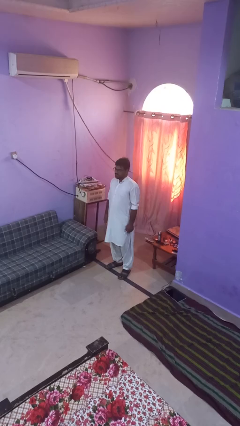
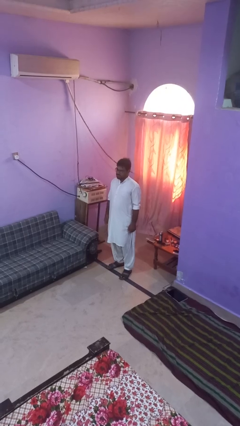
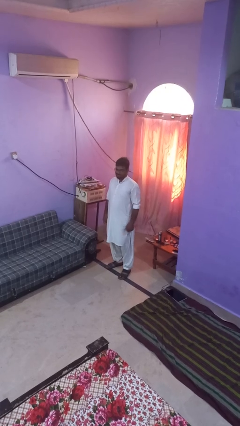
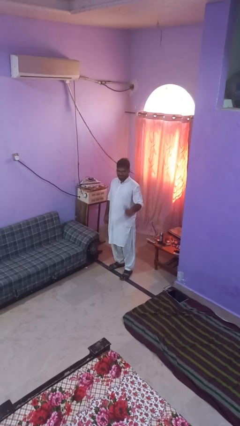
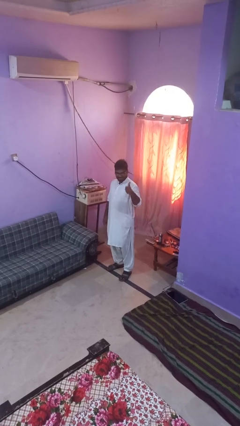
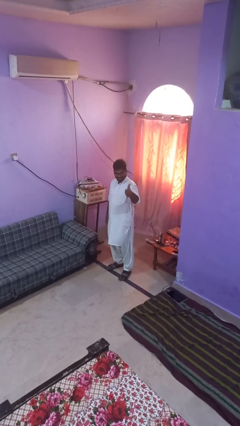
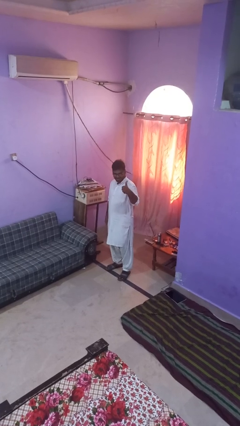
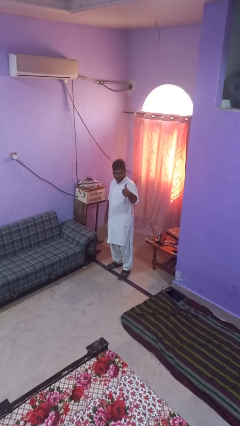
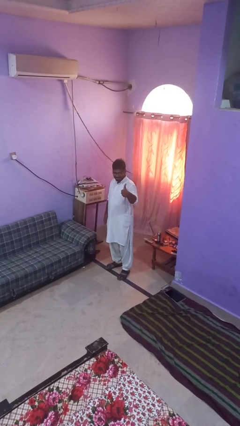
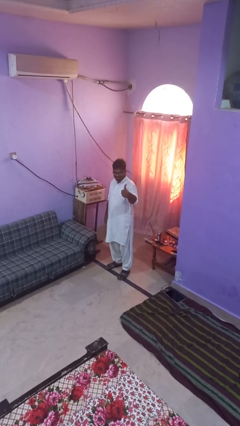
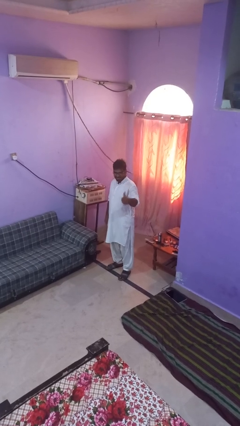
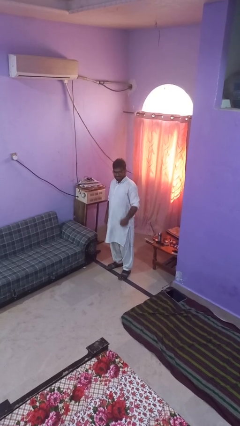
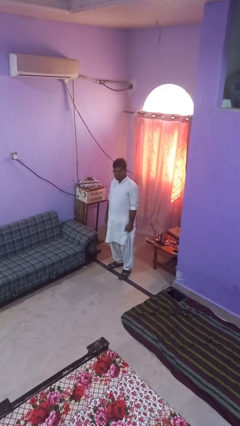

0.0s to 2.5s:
person gestures thumbs up

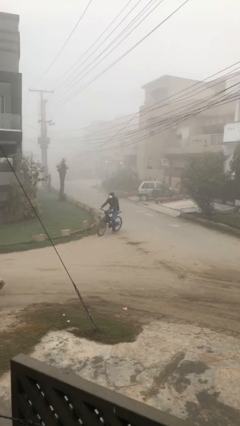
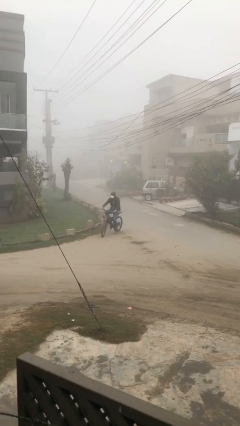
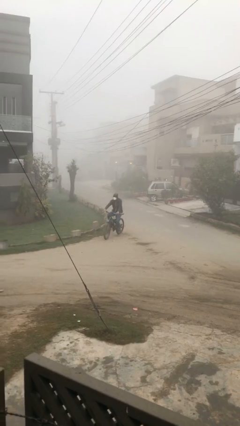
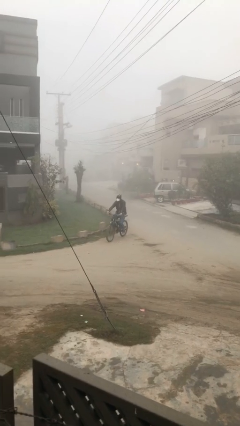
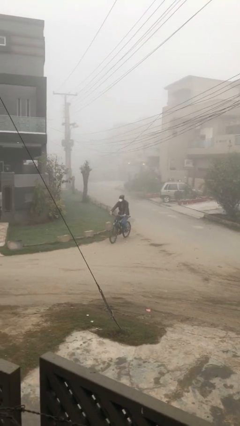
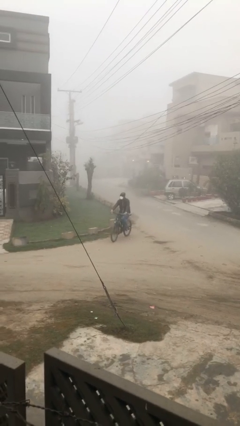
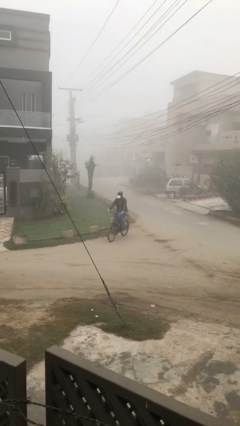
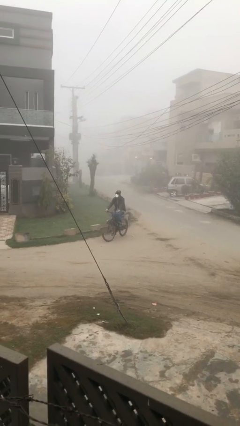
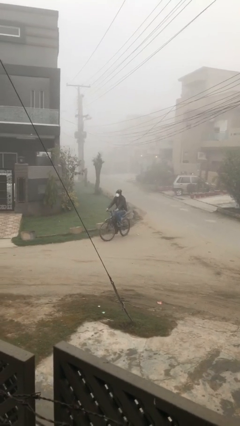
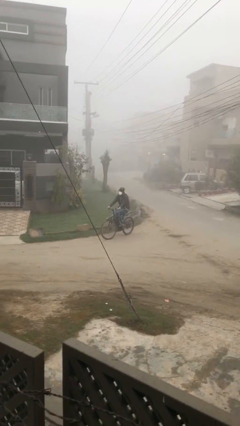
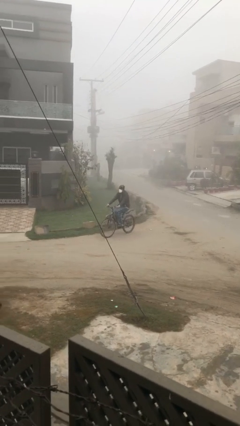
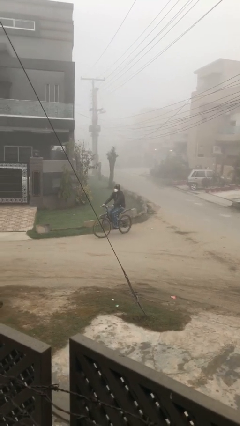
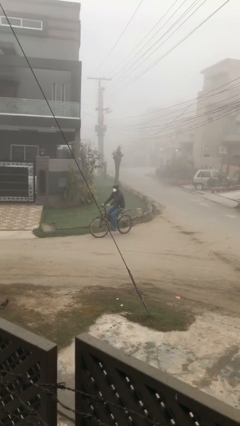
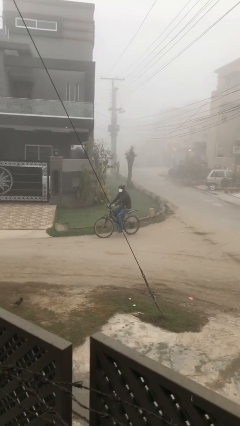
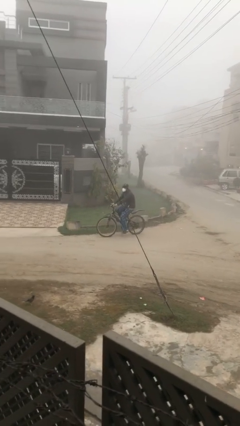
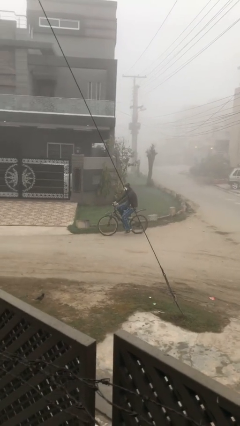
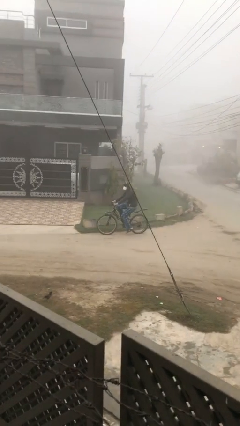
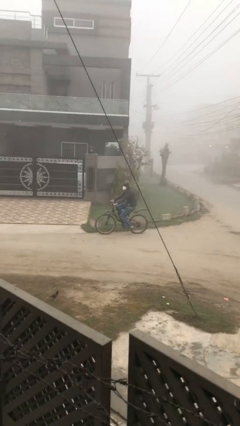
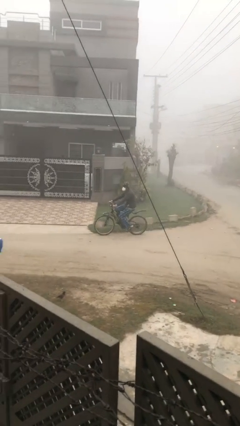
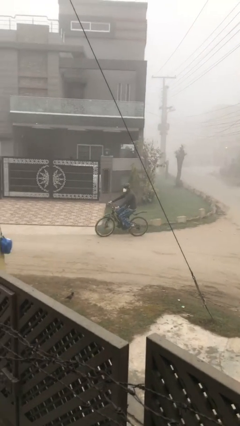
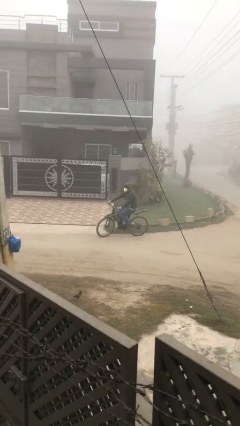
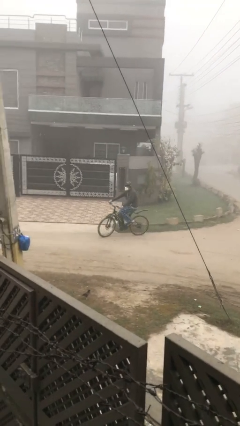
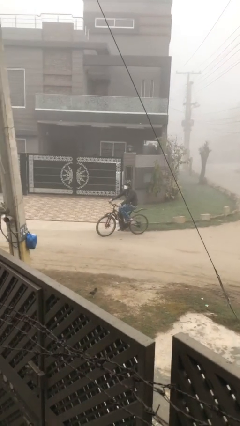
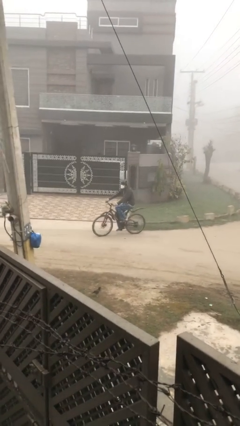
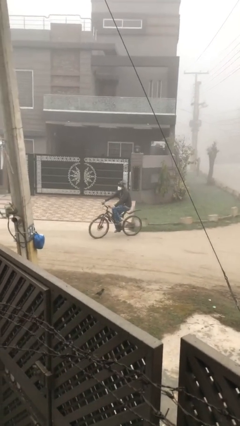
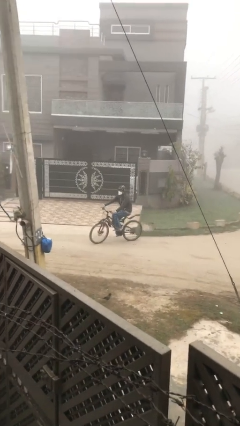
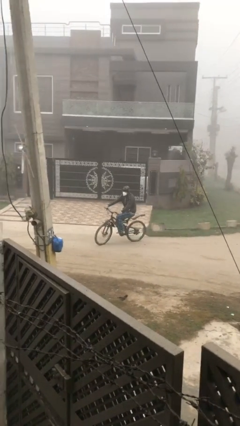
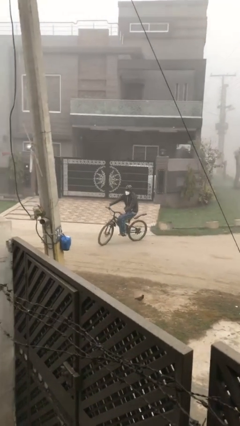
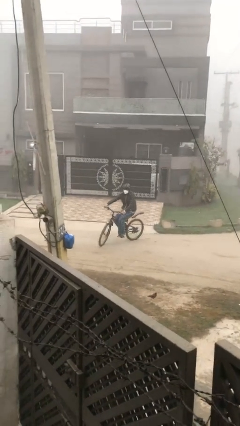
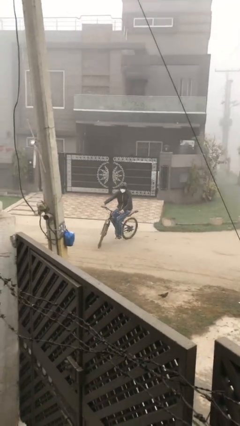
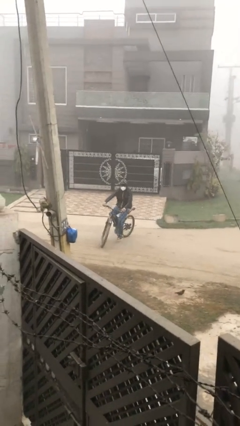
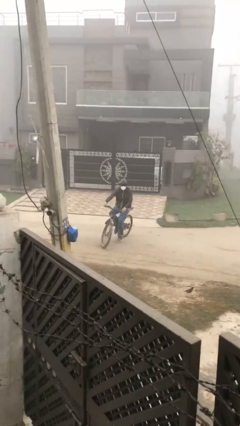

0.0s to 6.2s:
person rides bicycle

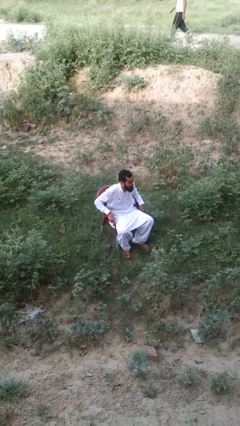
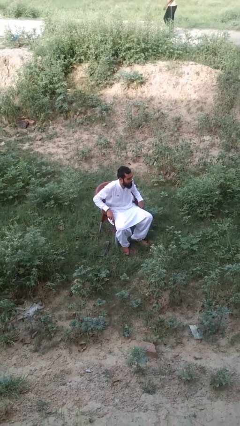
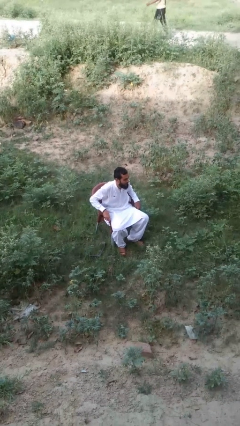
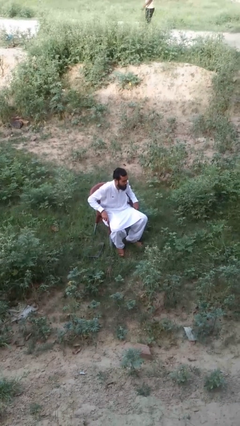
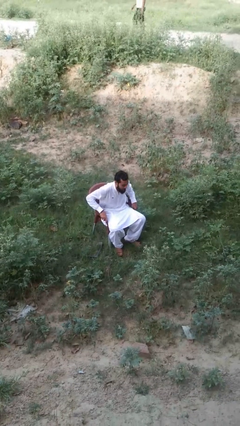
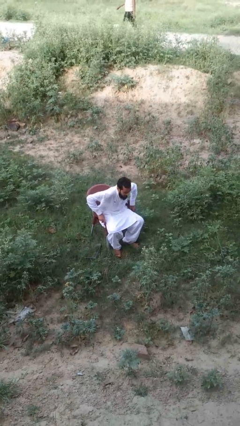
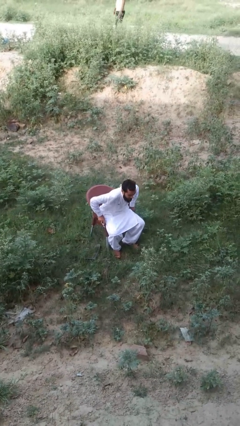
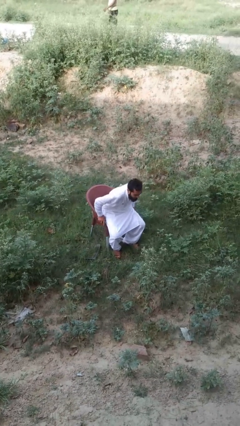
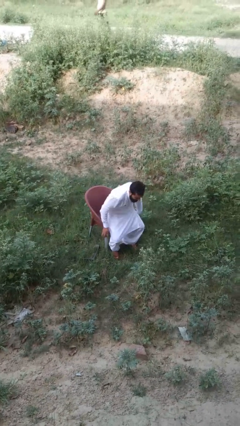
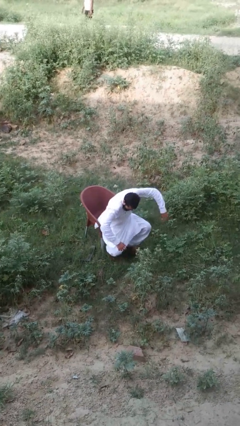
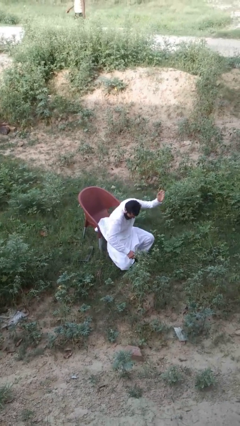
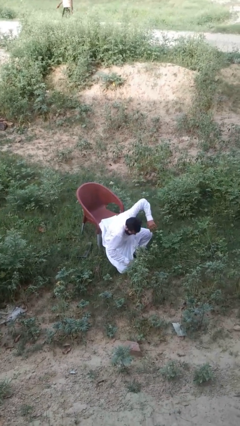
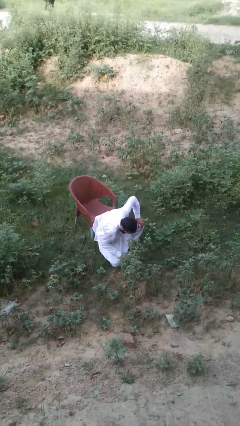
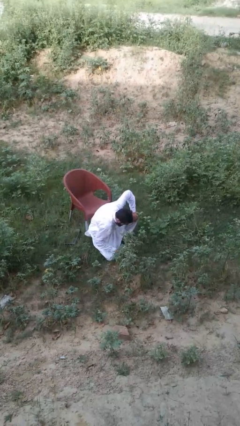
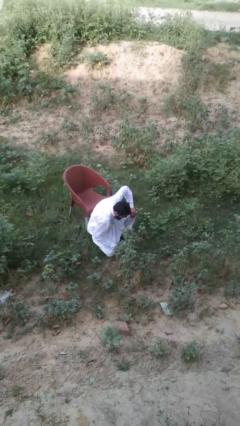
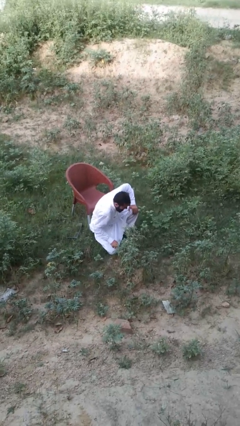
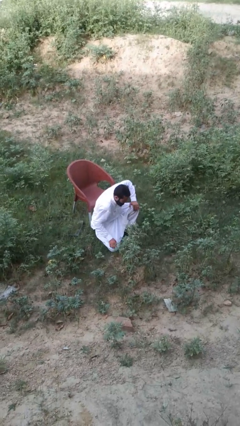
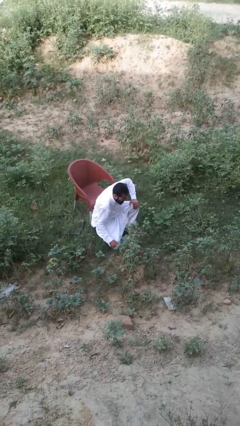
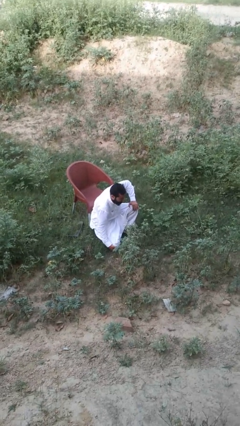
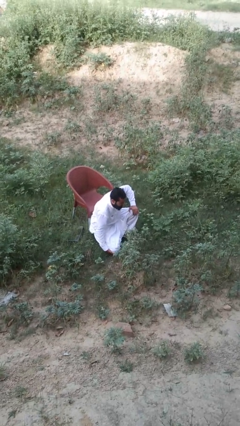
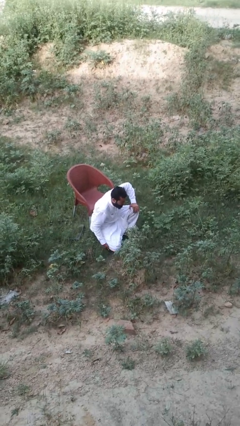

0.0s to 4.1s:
person falls from chair

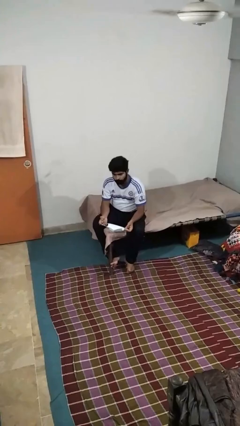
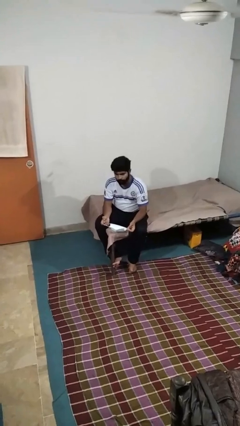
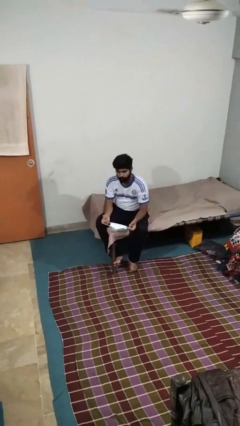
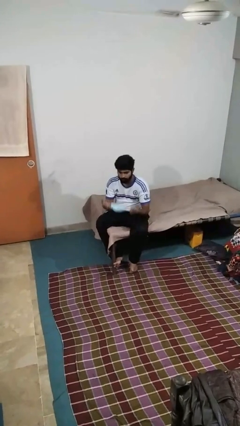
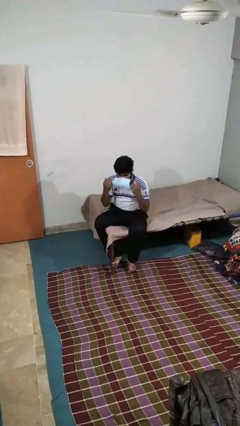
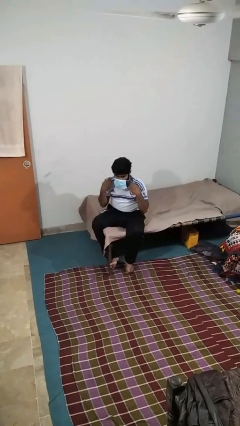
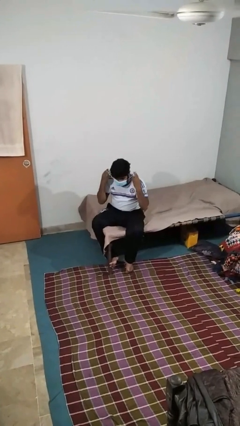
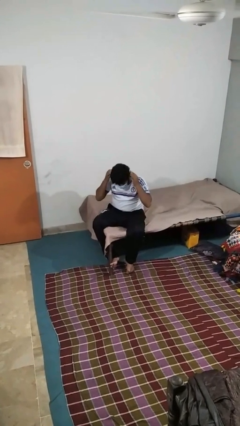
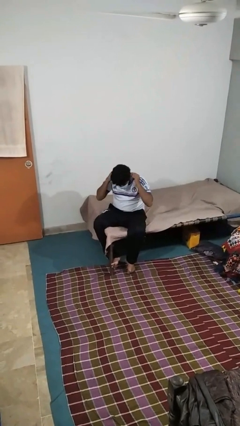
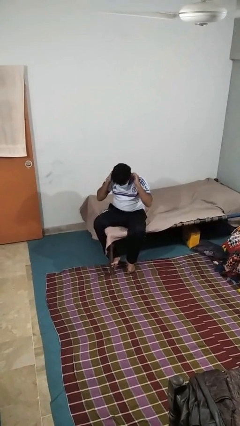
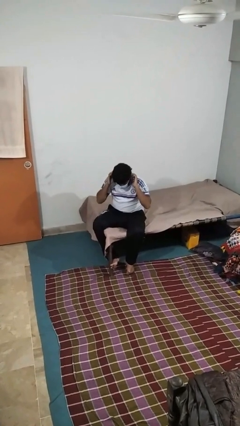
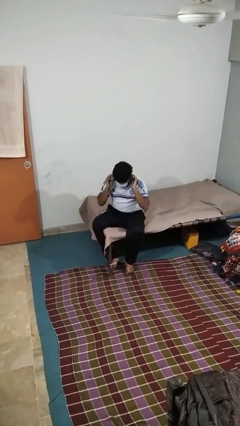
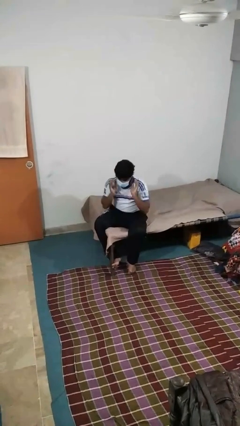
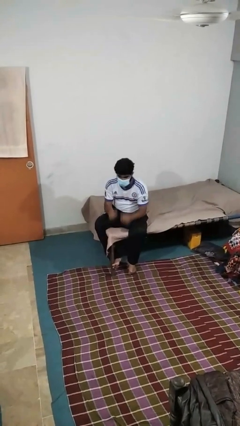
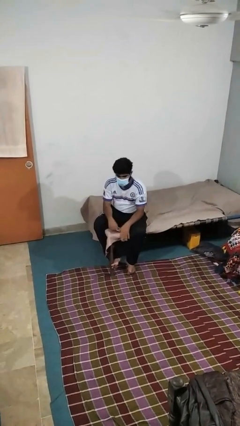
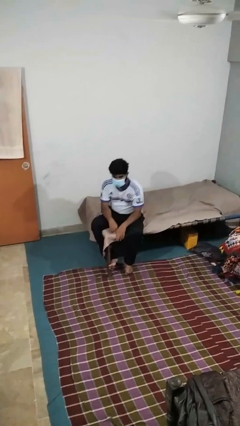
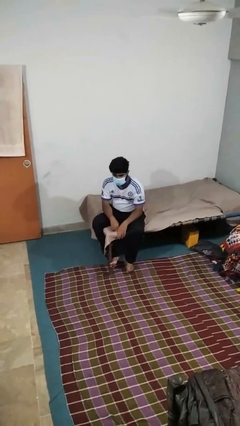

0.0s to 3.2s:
person puts on facemask

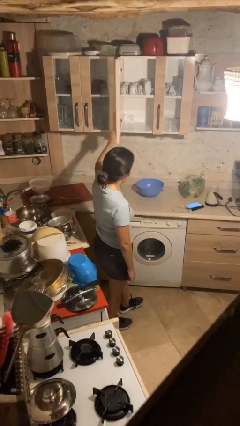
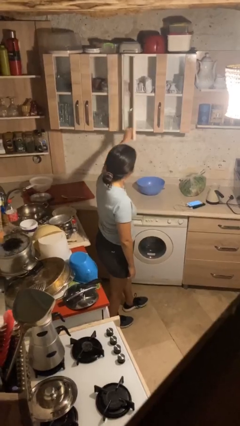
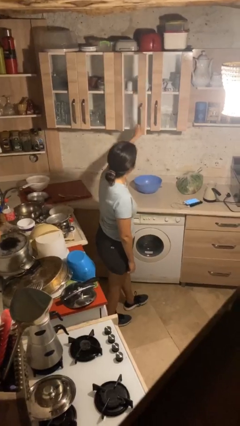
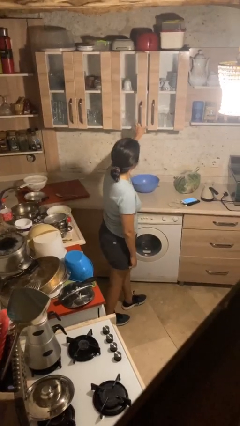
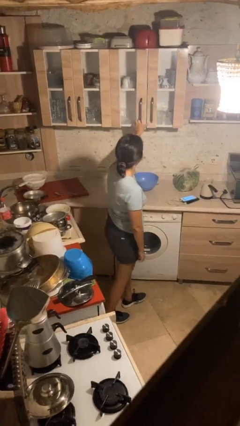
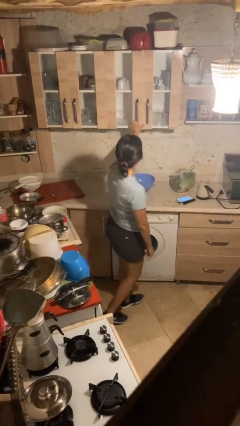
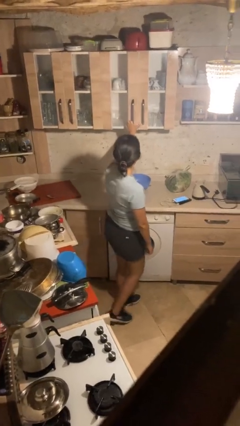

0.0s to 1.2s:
person closes cabinet

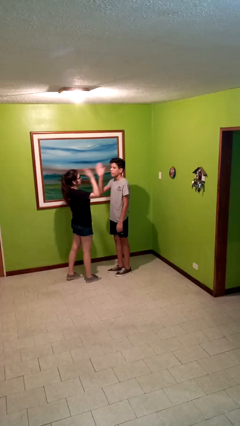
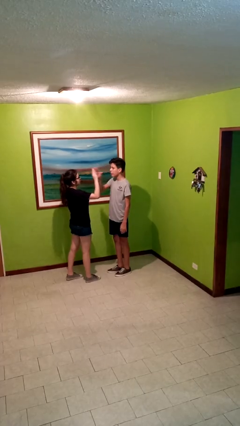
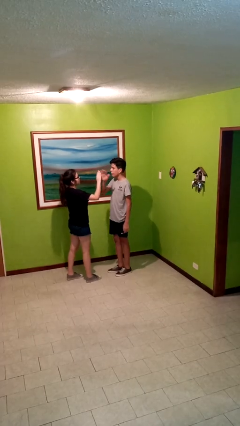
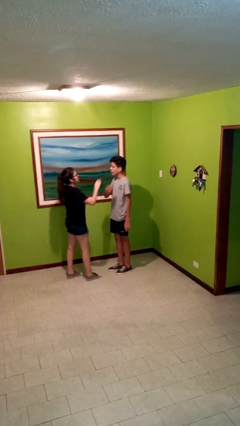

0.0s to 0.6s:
person highfives hand
